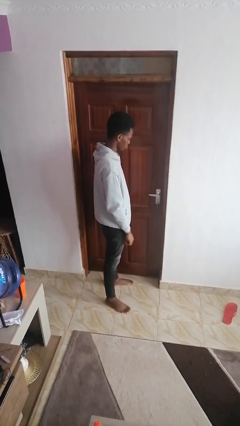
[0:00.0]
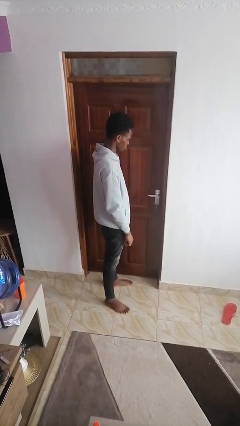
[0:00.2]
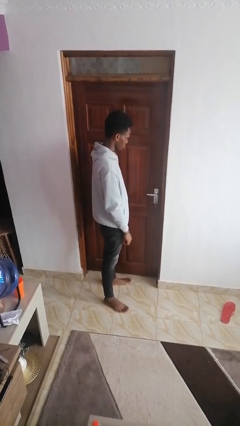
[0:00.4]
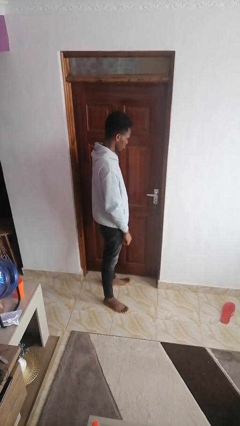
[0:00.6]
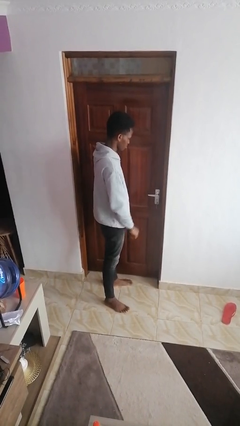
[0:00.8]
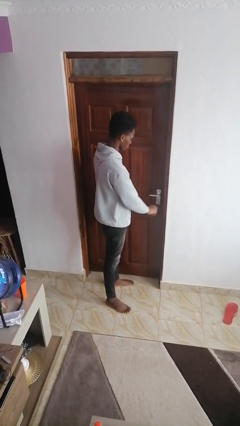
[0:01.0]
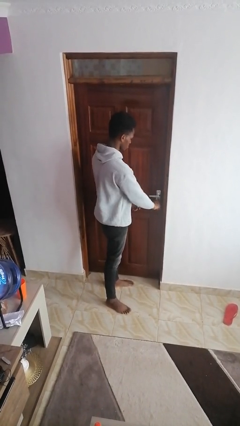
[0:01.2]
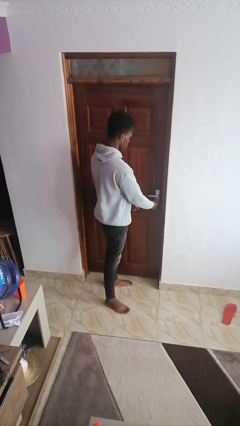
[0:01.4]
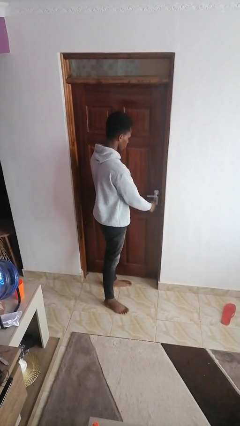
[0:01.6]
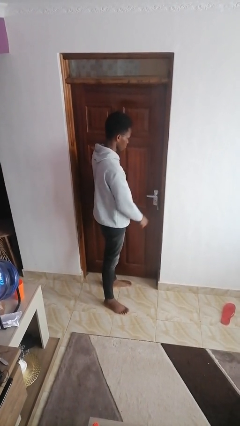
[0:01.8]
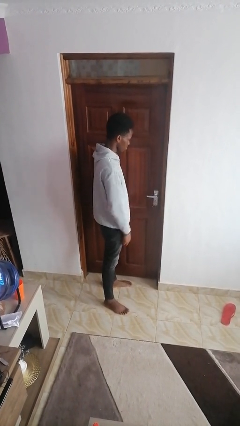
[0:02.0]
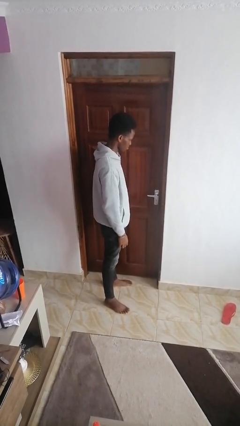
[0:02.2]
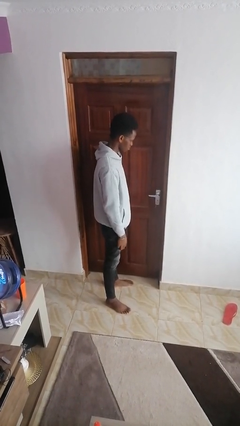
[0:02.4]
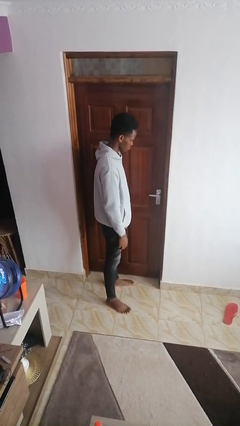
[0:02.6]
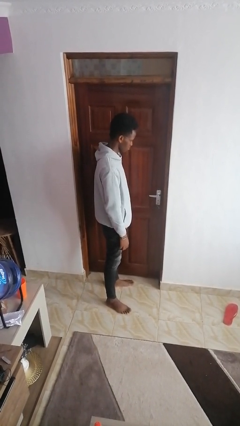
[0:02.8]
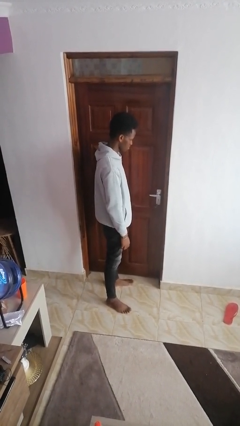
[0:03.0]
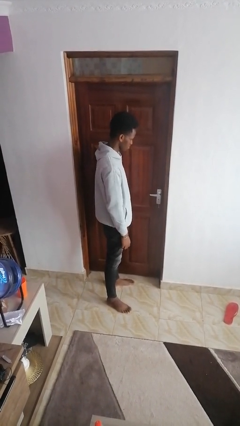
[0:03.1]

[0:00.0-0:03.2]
person unlocks door with keys

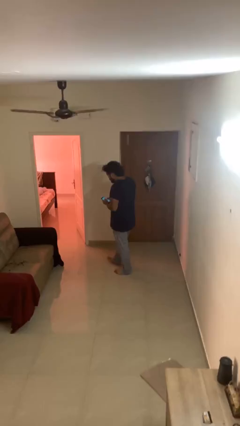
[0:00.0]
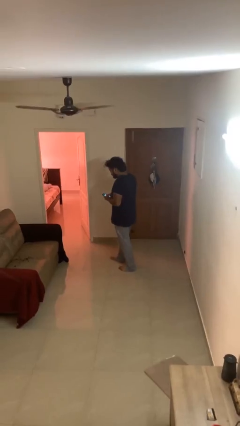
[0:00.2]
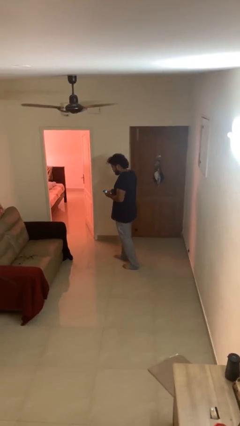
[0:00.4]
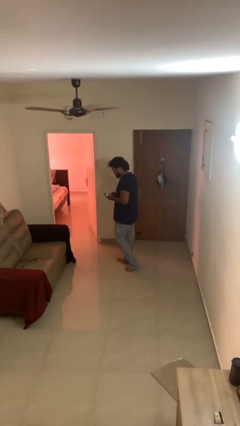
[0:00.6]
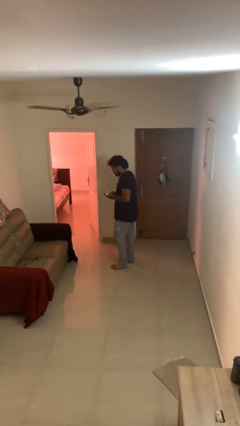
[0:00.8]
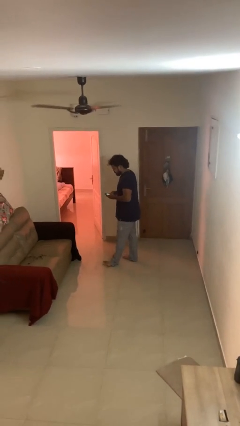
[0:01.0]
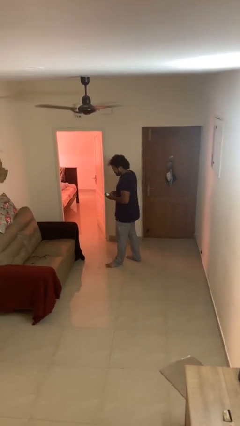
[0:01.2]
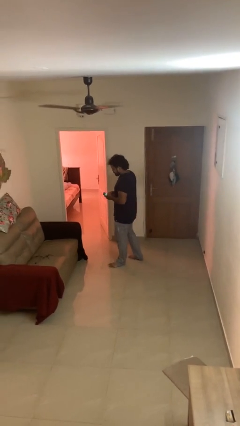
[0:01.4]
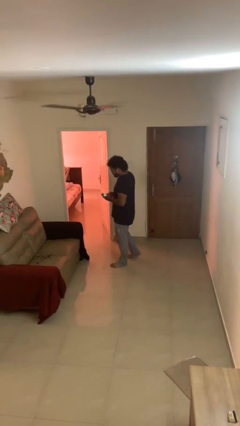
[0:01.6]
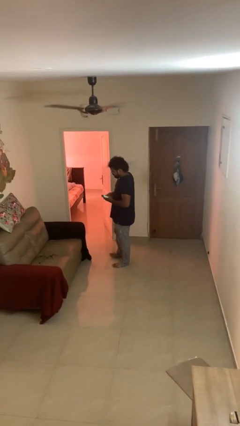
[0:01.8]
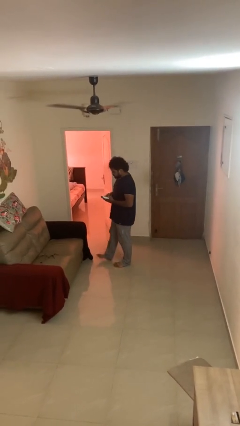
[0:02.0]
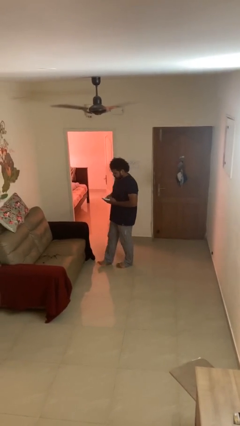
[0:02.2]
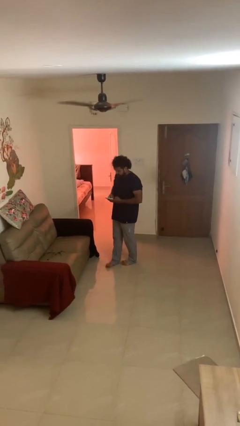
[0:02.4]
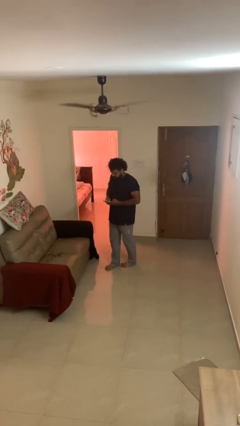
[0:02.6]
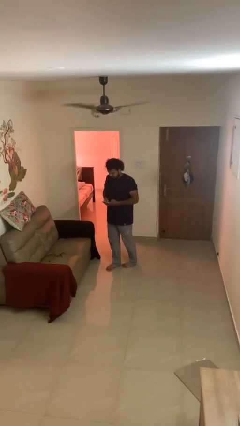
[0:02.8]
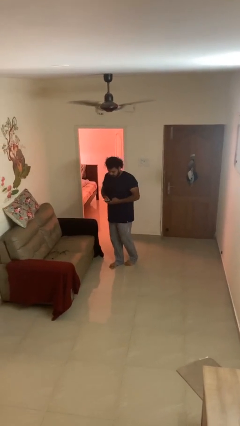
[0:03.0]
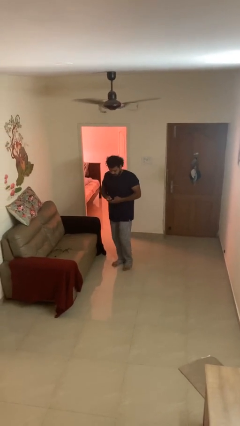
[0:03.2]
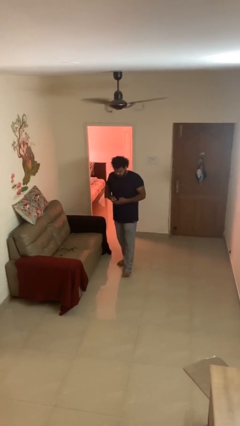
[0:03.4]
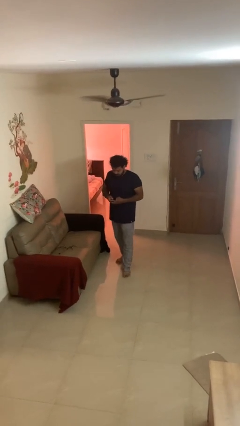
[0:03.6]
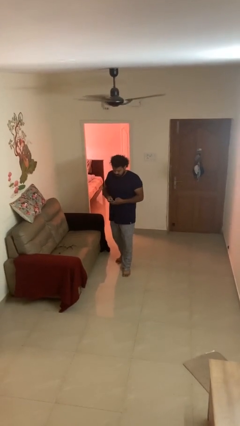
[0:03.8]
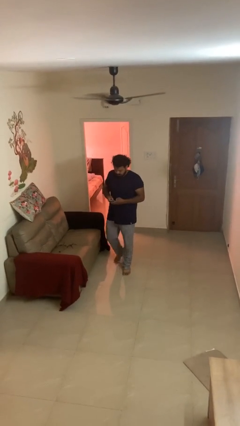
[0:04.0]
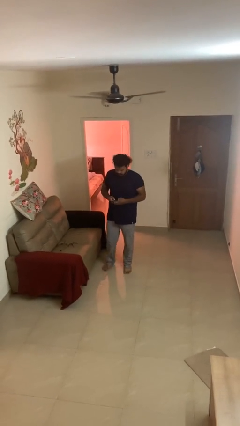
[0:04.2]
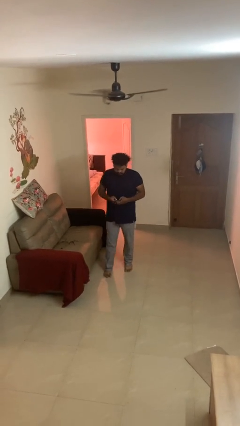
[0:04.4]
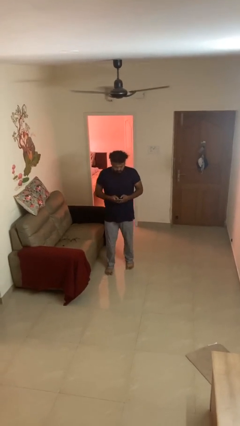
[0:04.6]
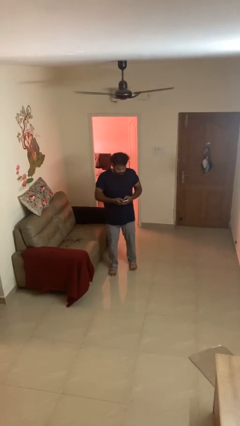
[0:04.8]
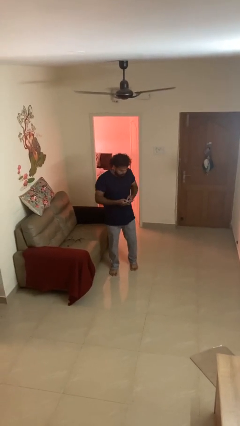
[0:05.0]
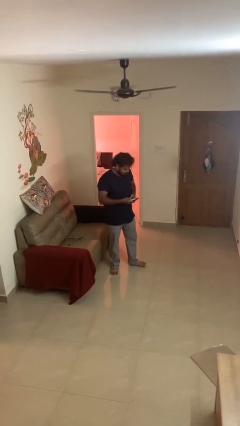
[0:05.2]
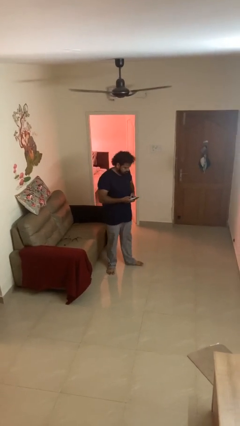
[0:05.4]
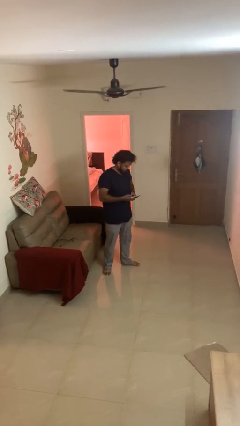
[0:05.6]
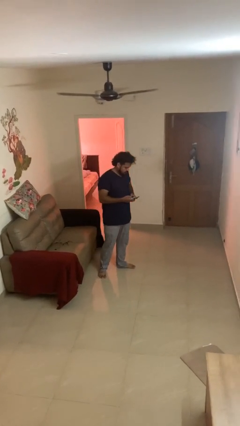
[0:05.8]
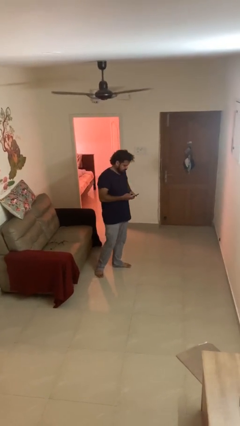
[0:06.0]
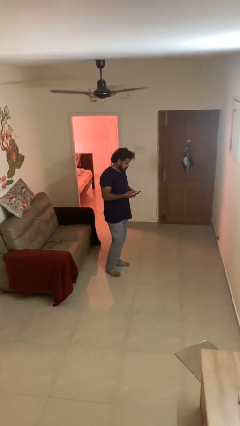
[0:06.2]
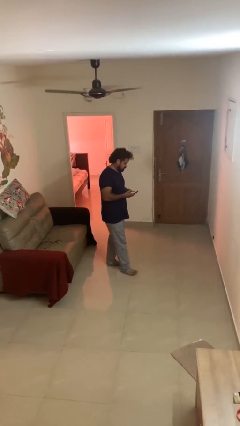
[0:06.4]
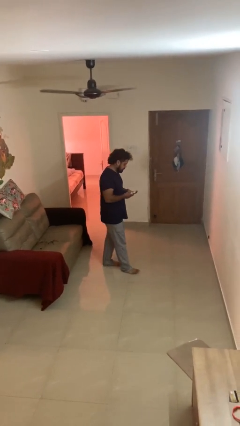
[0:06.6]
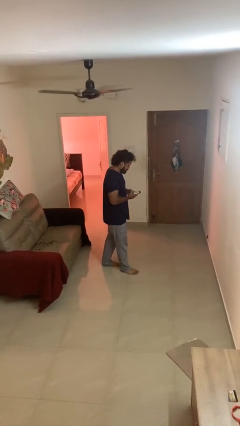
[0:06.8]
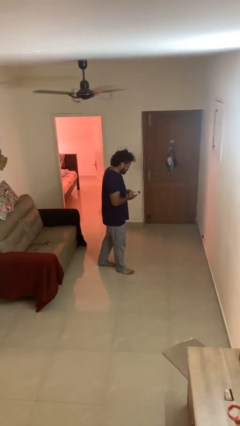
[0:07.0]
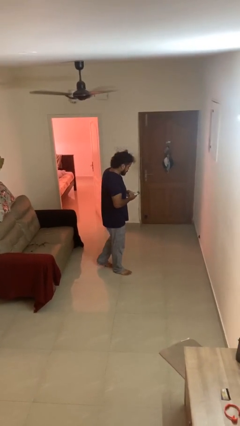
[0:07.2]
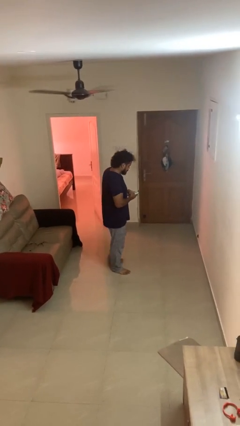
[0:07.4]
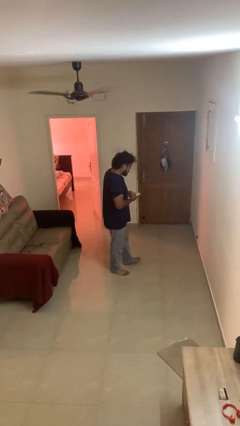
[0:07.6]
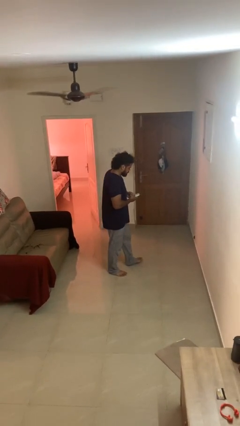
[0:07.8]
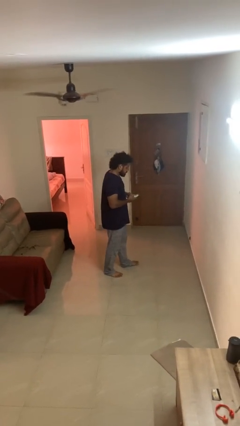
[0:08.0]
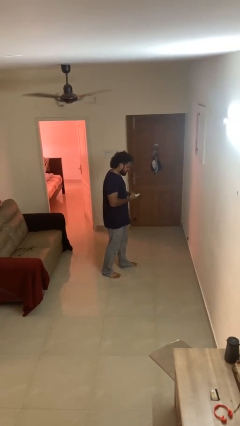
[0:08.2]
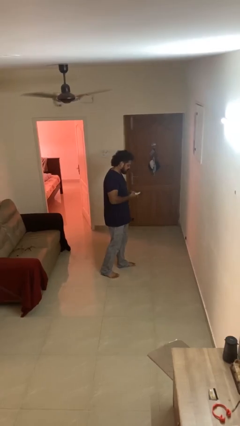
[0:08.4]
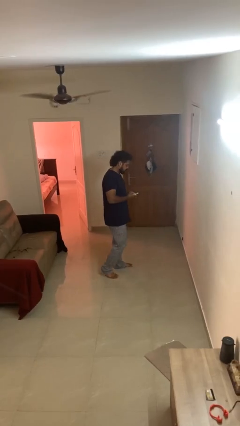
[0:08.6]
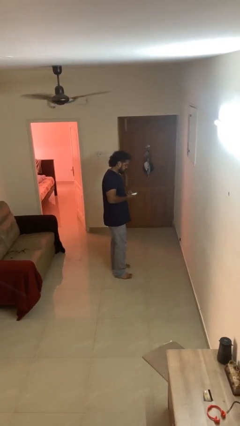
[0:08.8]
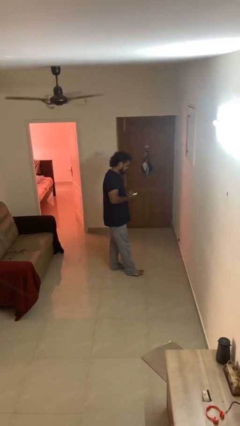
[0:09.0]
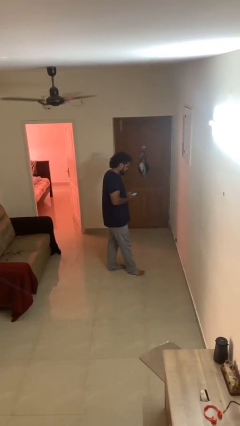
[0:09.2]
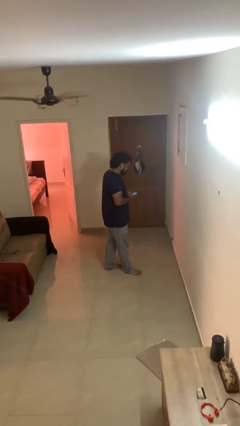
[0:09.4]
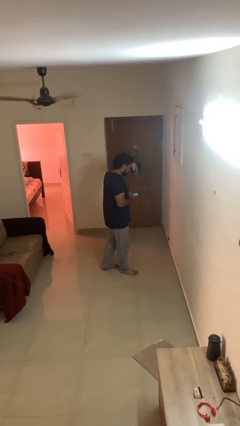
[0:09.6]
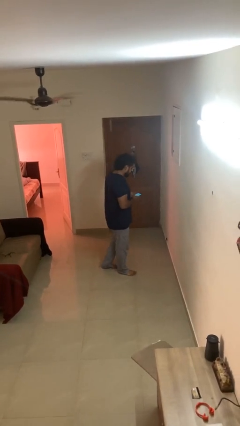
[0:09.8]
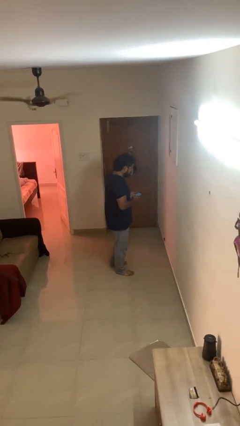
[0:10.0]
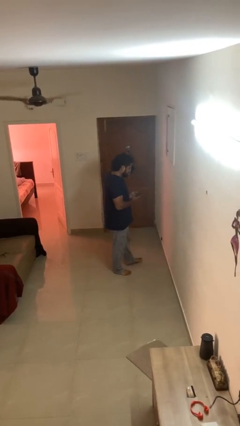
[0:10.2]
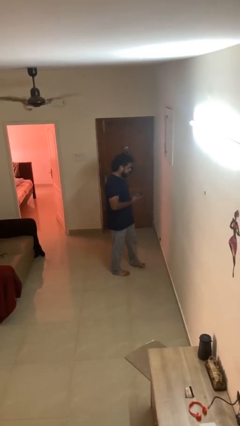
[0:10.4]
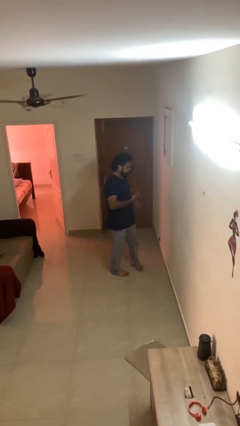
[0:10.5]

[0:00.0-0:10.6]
person texts on phone

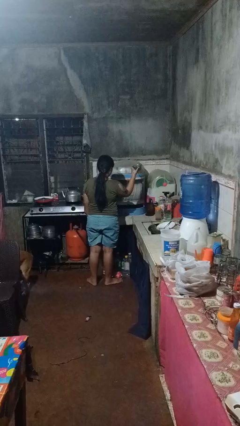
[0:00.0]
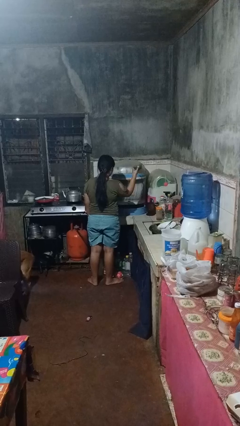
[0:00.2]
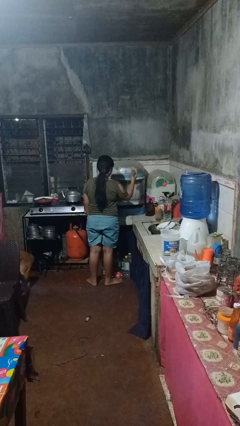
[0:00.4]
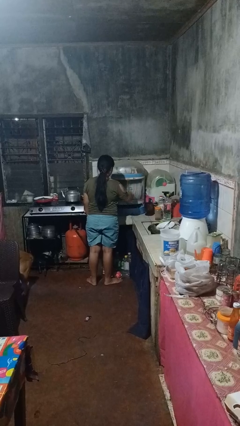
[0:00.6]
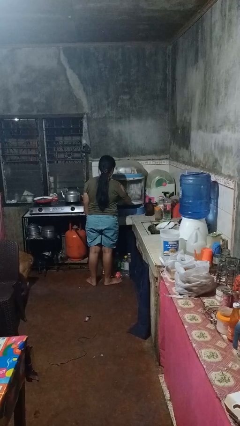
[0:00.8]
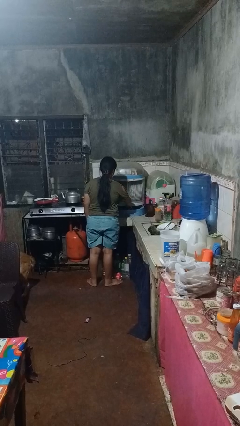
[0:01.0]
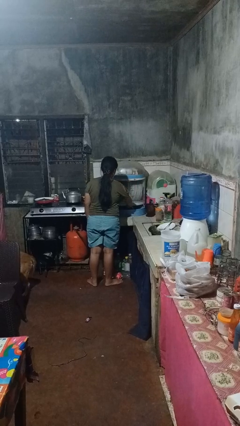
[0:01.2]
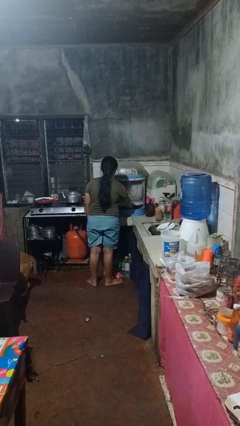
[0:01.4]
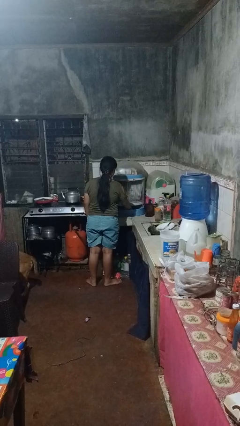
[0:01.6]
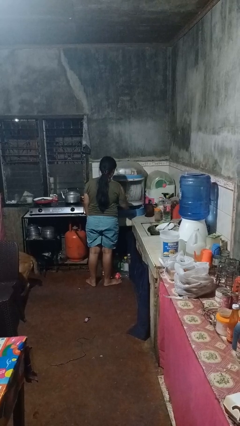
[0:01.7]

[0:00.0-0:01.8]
person puts object into kitchen drawer

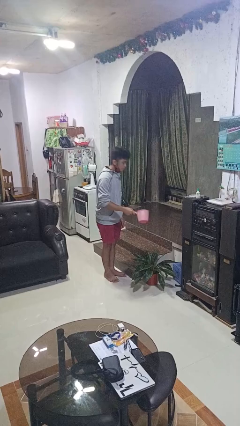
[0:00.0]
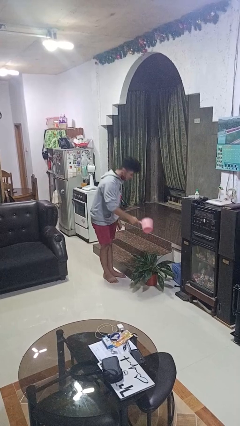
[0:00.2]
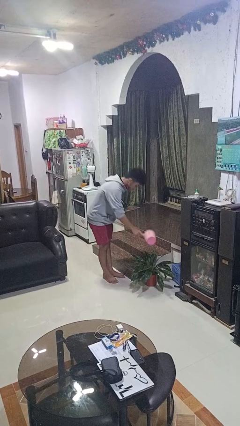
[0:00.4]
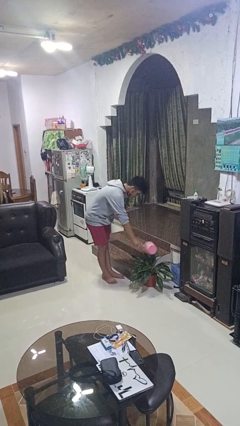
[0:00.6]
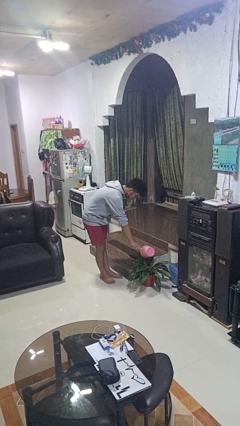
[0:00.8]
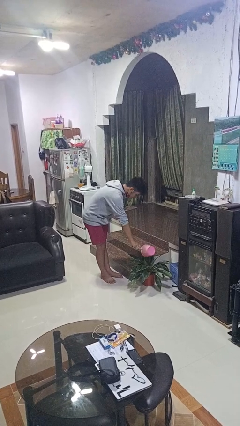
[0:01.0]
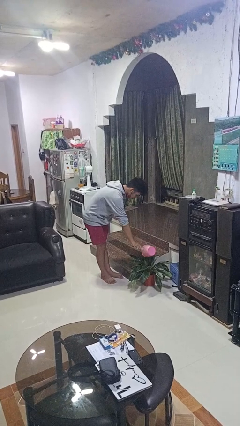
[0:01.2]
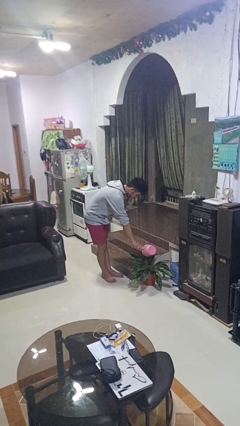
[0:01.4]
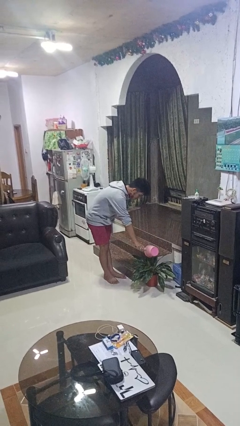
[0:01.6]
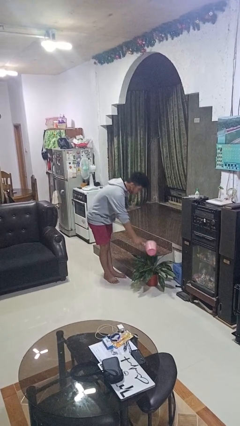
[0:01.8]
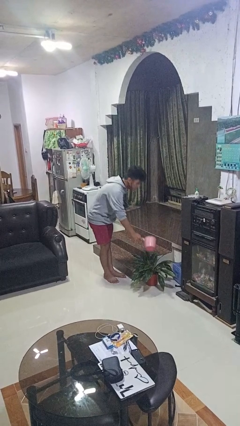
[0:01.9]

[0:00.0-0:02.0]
person waters houseplant

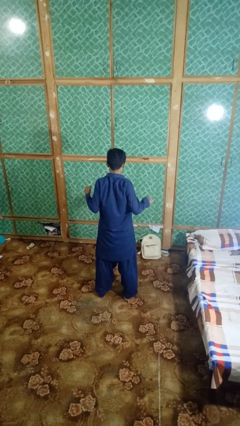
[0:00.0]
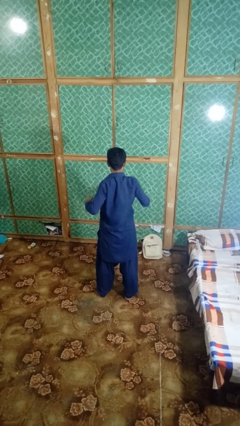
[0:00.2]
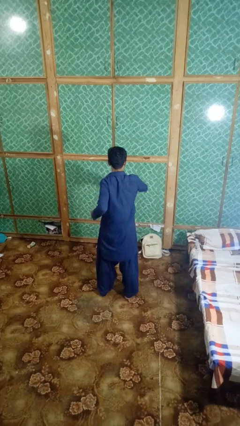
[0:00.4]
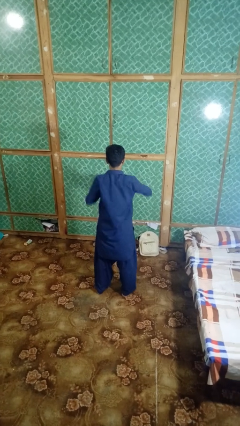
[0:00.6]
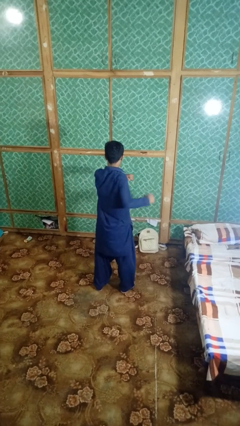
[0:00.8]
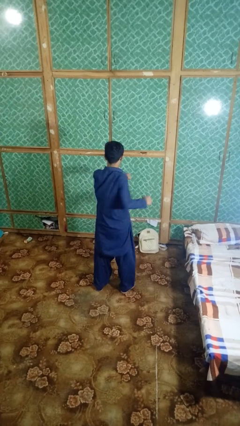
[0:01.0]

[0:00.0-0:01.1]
person stretches arms to side
